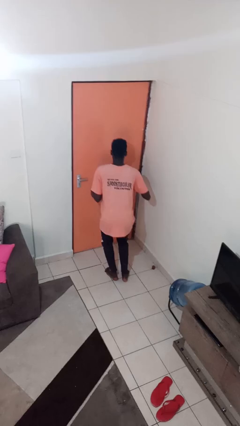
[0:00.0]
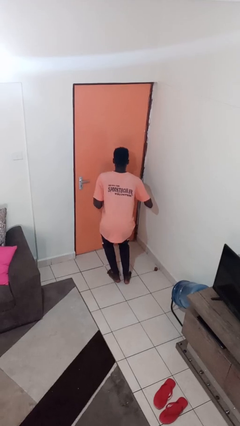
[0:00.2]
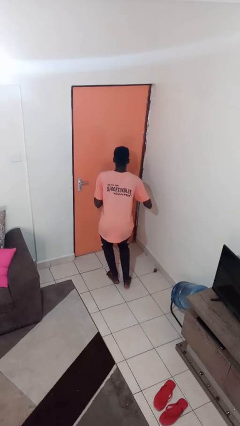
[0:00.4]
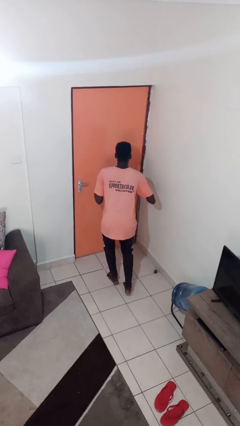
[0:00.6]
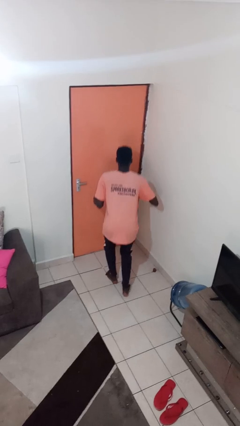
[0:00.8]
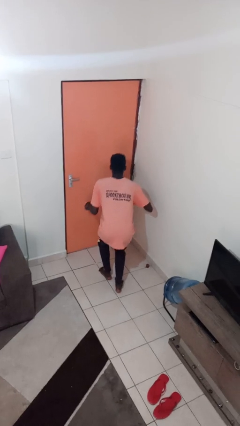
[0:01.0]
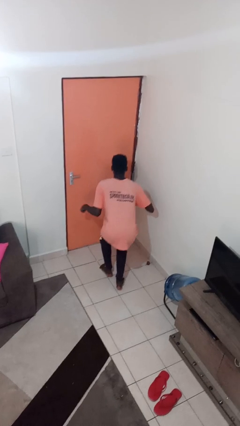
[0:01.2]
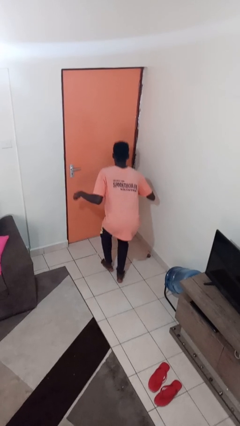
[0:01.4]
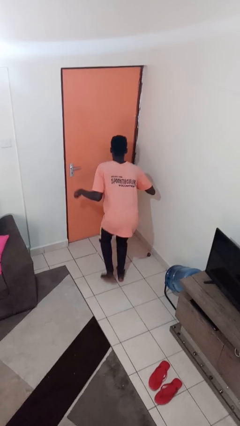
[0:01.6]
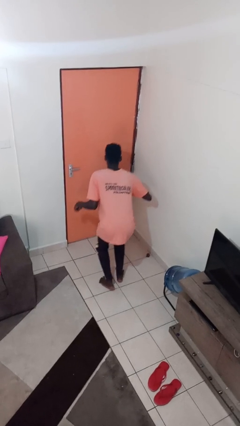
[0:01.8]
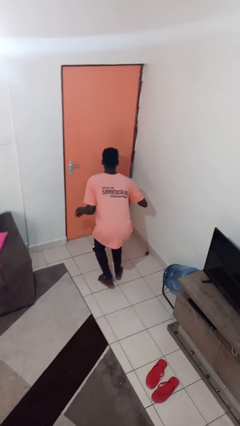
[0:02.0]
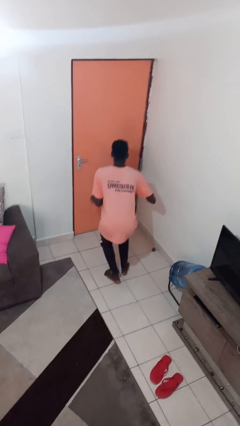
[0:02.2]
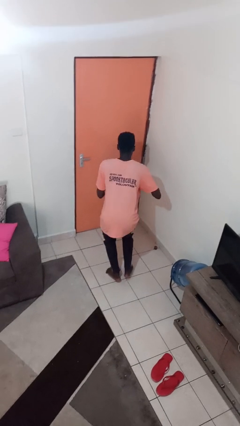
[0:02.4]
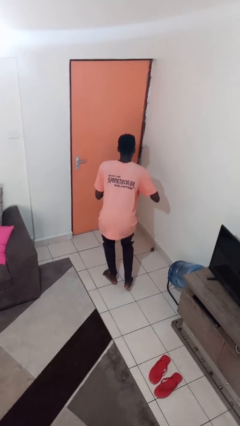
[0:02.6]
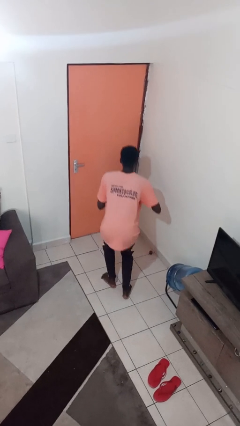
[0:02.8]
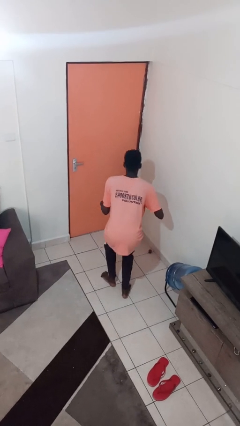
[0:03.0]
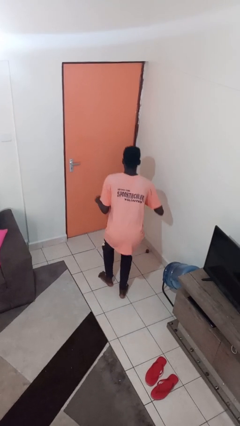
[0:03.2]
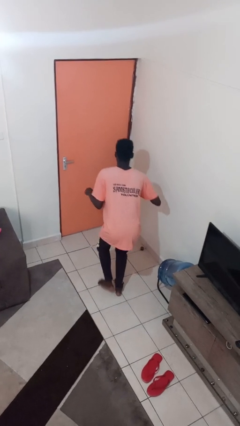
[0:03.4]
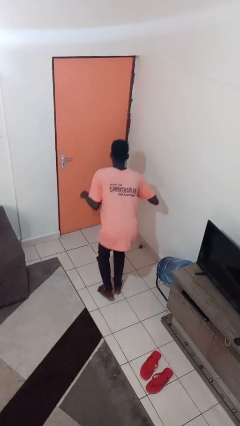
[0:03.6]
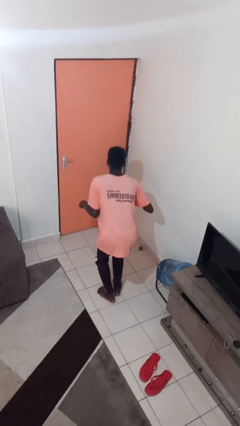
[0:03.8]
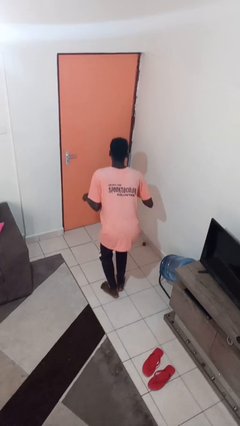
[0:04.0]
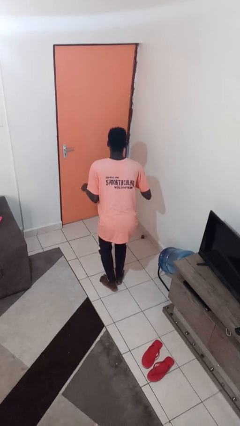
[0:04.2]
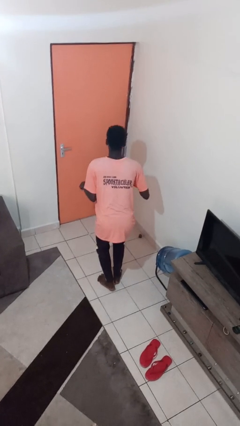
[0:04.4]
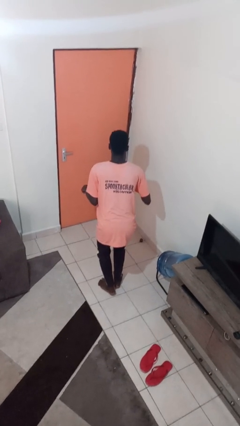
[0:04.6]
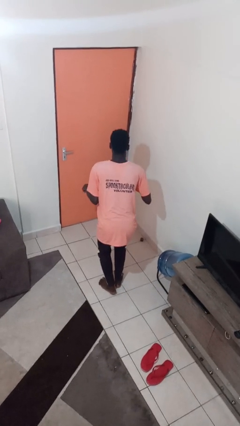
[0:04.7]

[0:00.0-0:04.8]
person walks tiptoe

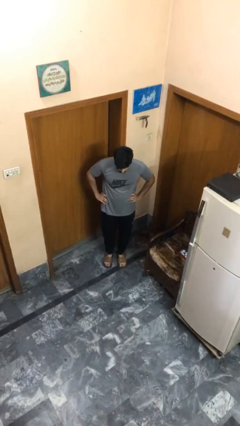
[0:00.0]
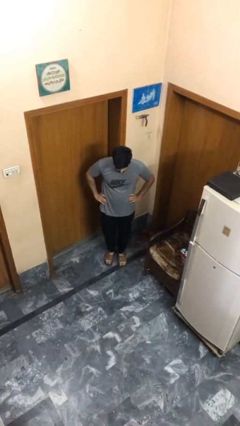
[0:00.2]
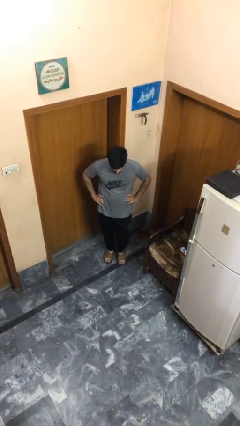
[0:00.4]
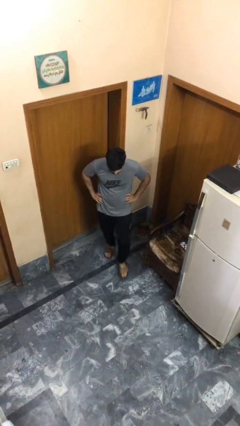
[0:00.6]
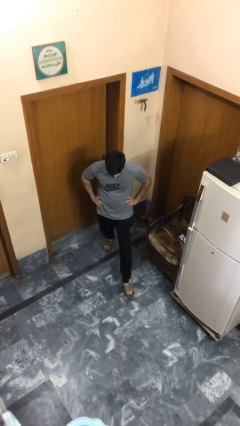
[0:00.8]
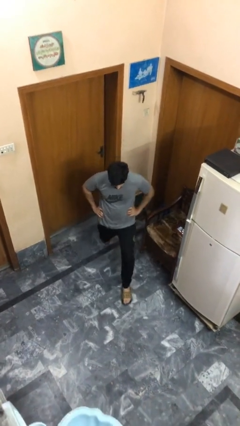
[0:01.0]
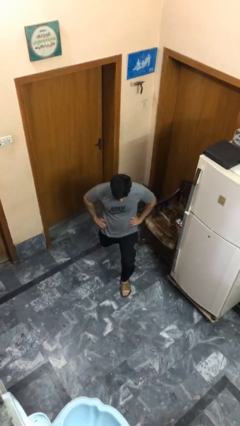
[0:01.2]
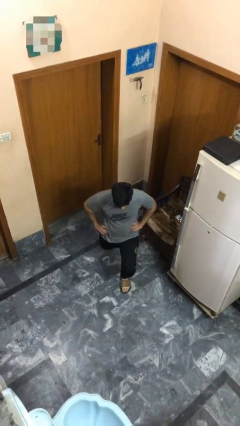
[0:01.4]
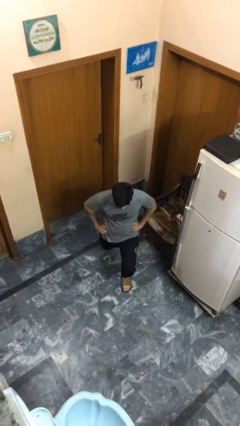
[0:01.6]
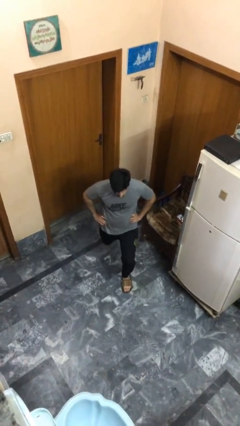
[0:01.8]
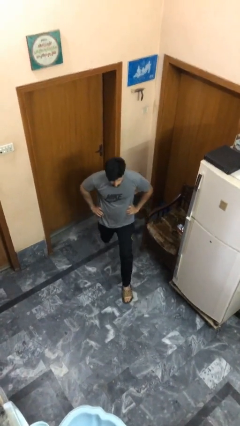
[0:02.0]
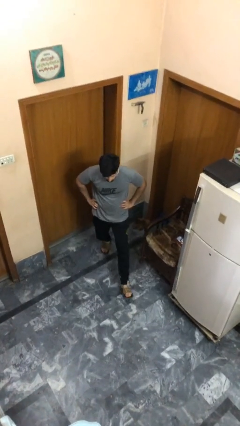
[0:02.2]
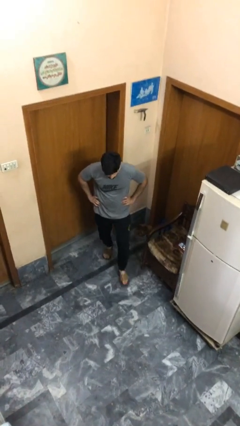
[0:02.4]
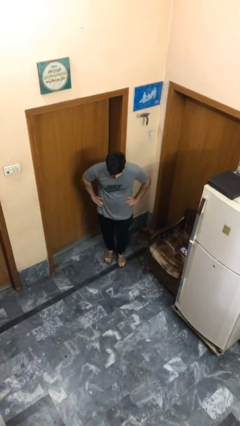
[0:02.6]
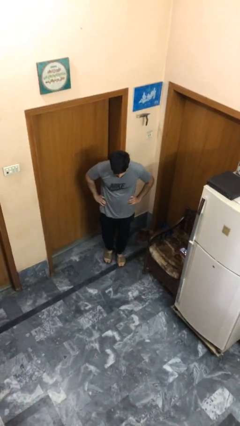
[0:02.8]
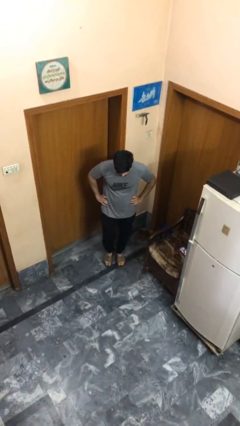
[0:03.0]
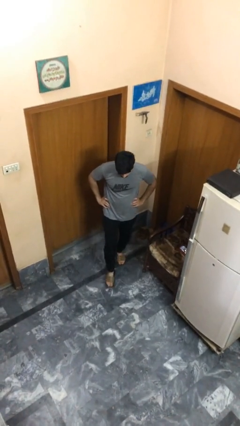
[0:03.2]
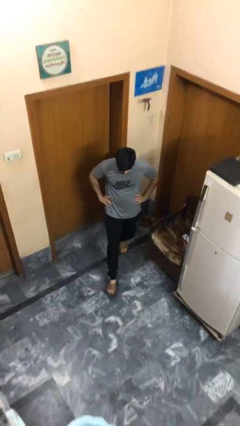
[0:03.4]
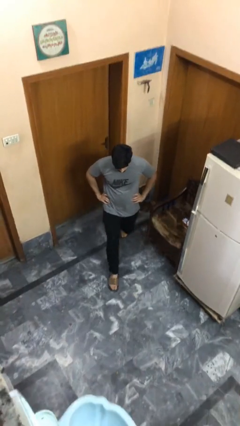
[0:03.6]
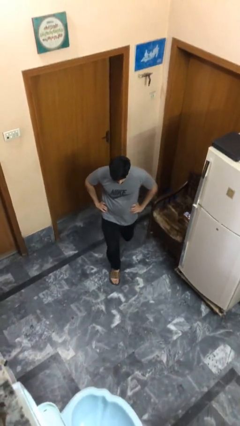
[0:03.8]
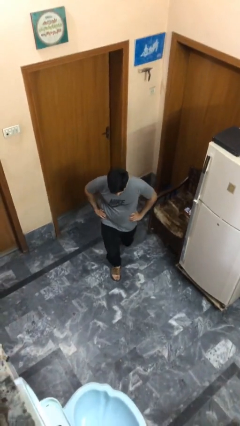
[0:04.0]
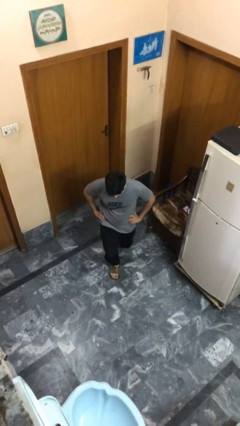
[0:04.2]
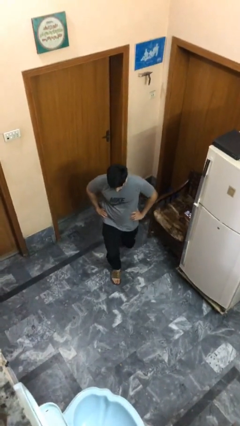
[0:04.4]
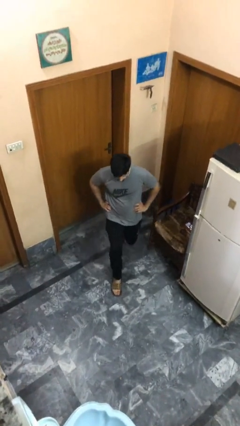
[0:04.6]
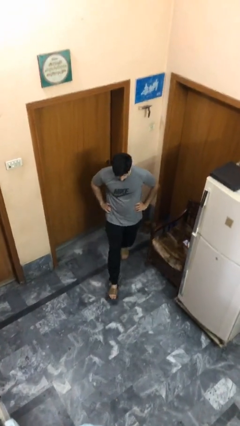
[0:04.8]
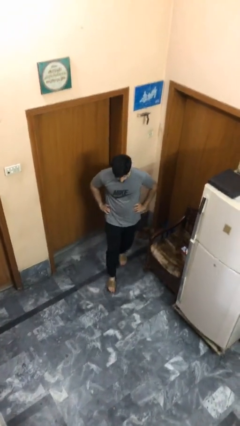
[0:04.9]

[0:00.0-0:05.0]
person exercises with lunges

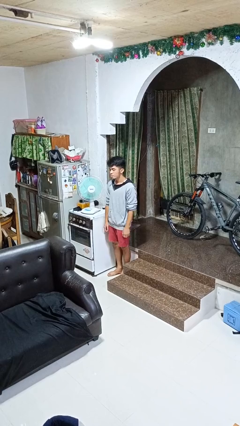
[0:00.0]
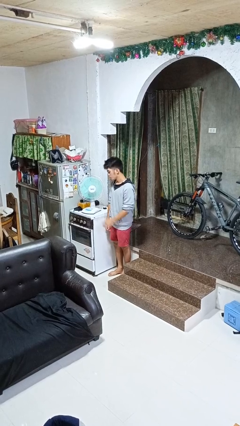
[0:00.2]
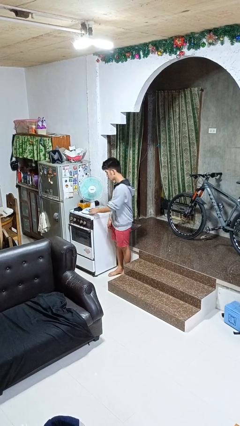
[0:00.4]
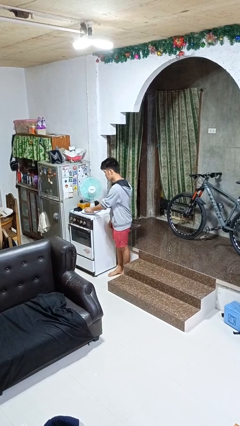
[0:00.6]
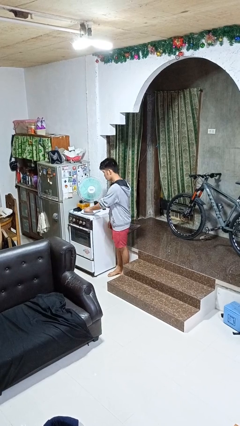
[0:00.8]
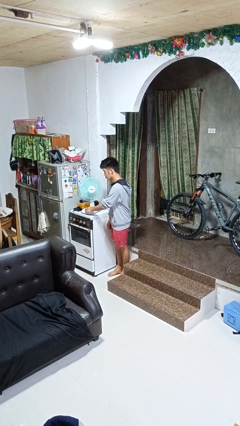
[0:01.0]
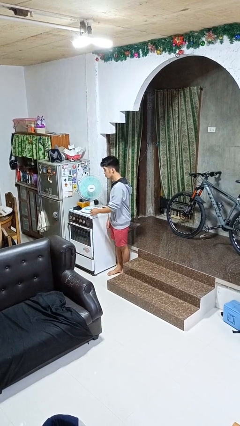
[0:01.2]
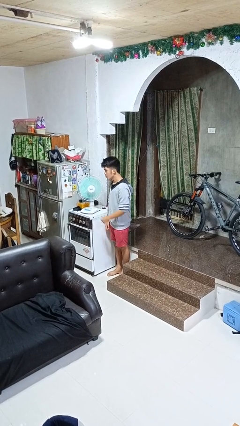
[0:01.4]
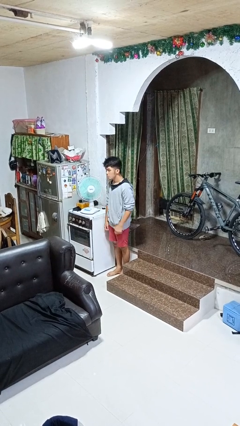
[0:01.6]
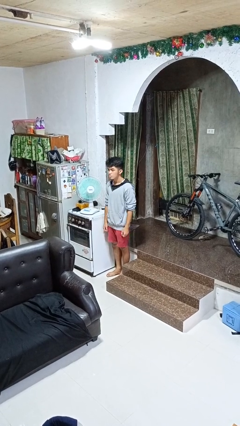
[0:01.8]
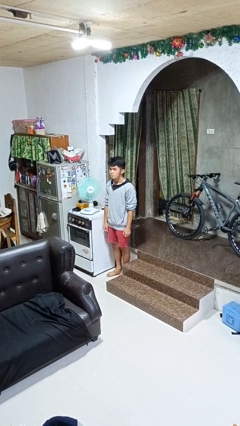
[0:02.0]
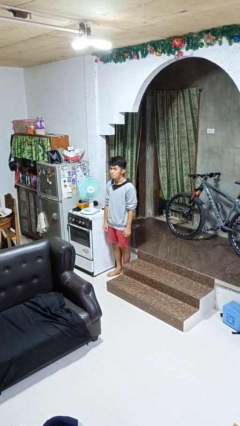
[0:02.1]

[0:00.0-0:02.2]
person turns off fan

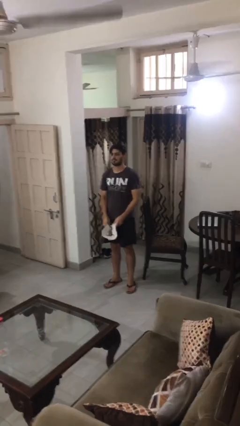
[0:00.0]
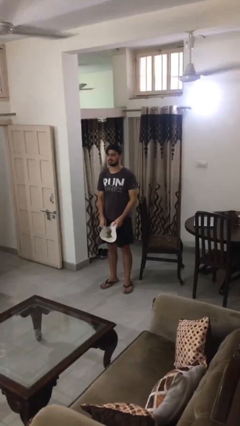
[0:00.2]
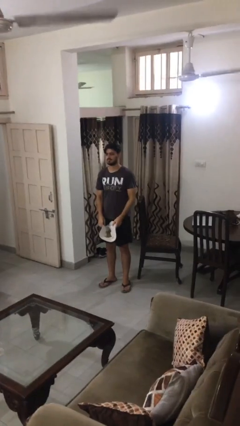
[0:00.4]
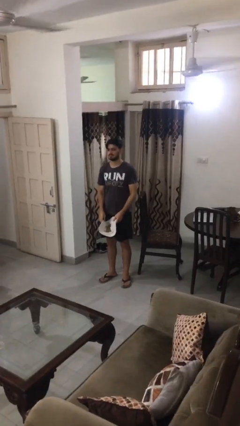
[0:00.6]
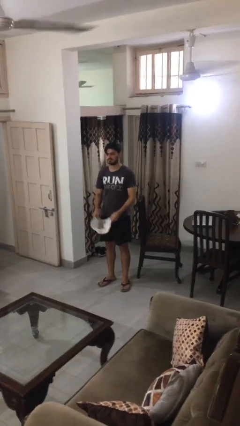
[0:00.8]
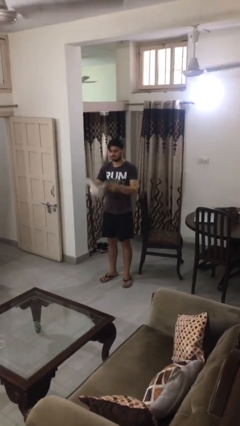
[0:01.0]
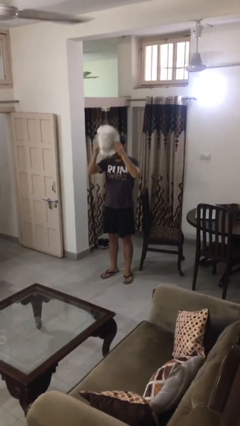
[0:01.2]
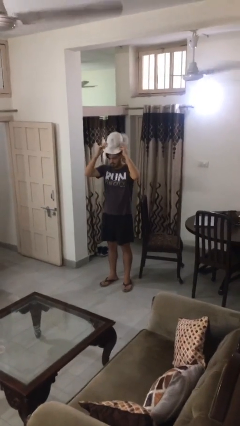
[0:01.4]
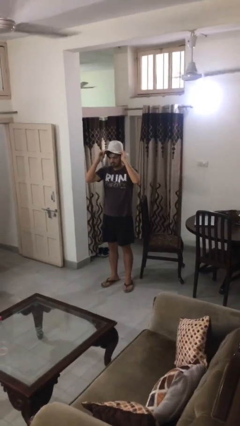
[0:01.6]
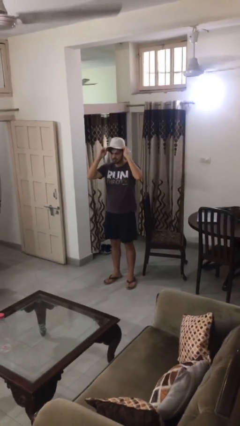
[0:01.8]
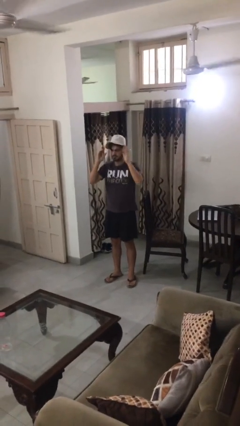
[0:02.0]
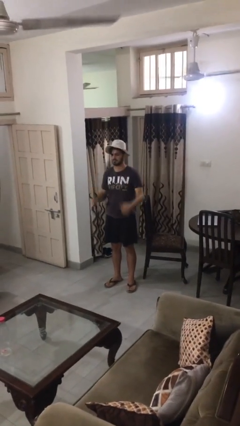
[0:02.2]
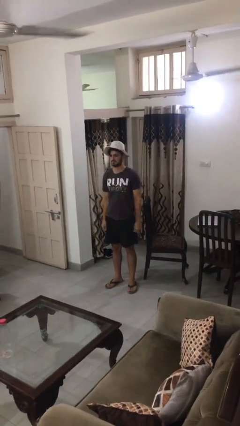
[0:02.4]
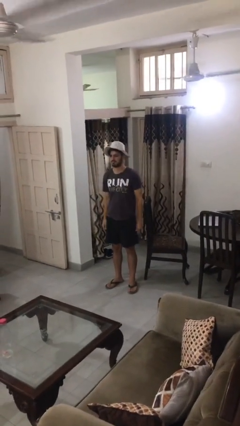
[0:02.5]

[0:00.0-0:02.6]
person puts on hat

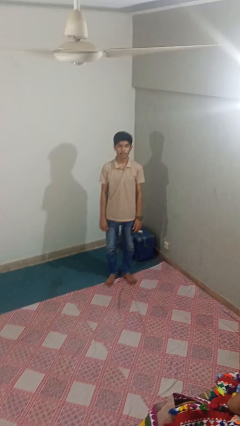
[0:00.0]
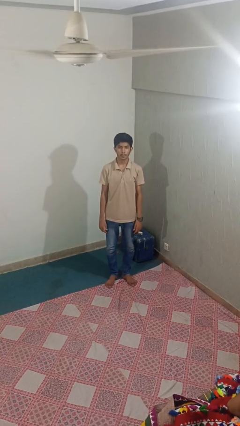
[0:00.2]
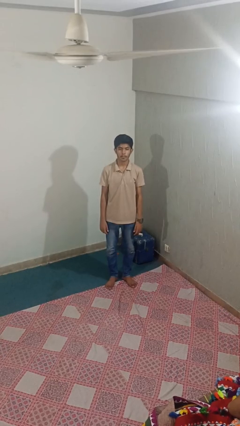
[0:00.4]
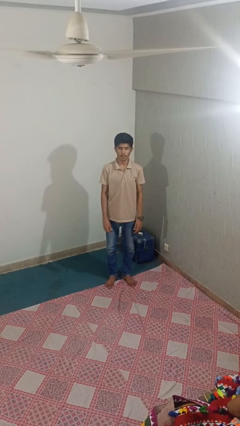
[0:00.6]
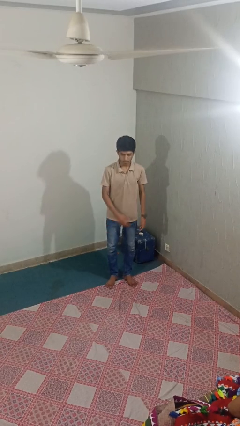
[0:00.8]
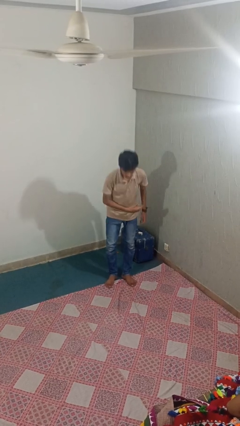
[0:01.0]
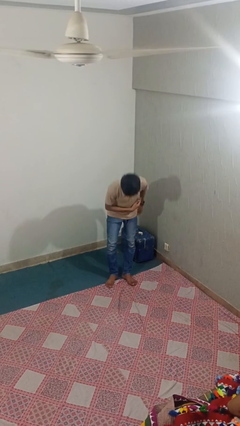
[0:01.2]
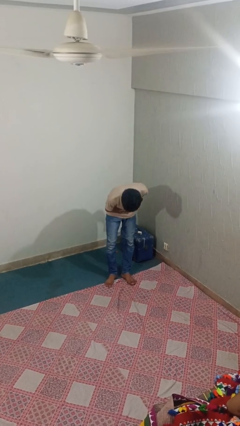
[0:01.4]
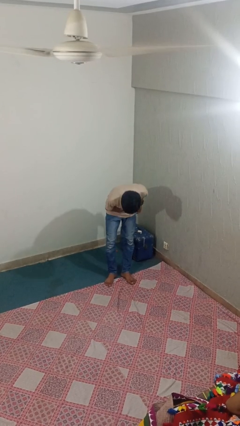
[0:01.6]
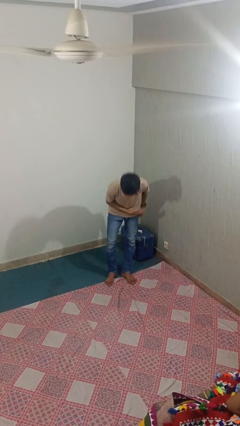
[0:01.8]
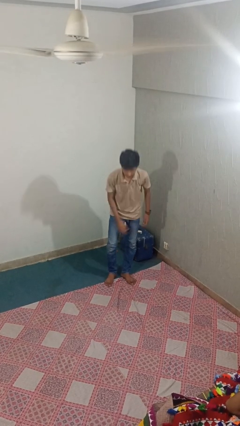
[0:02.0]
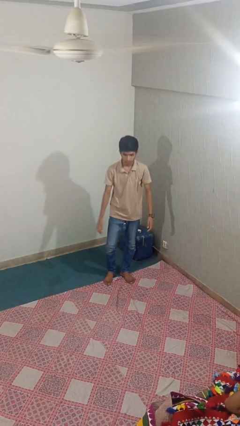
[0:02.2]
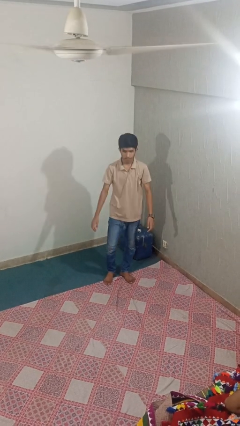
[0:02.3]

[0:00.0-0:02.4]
person bows

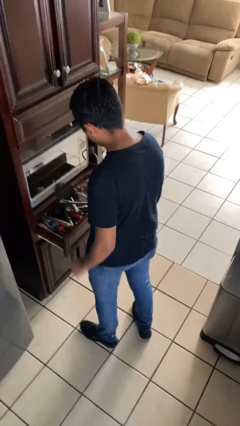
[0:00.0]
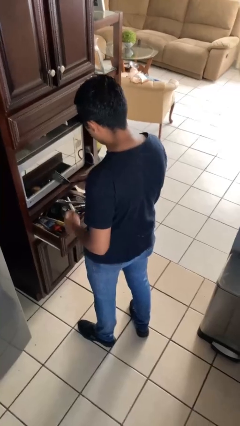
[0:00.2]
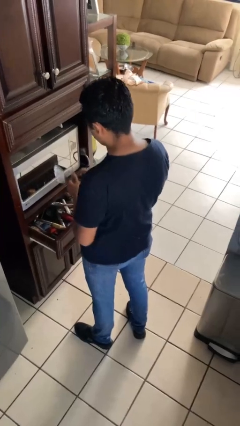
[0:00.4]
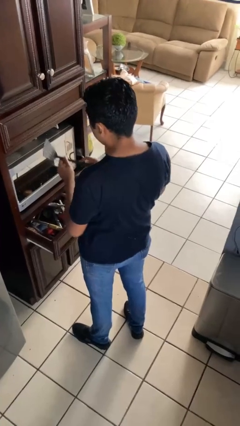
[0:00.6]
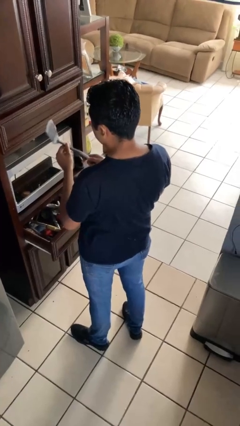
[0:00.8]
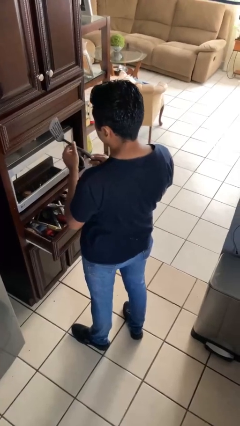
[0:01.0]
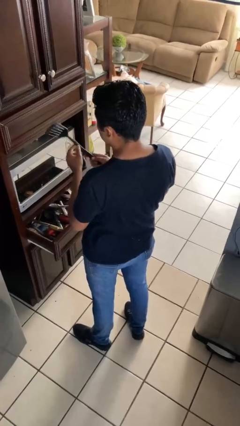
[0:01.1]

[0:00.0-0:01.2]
person takes object from kitchen drawer
